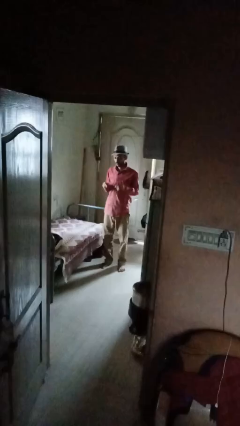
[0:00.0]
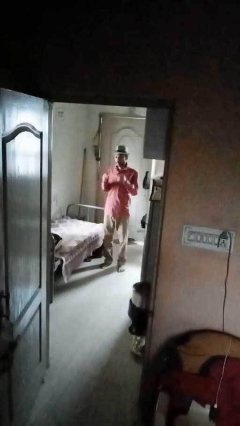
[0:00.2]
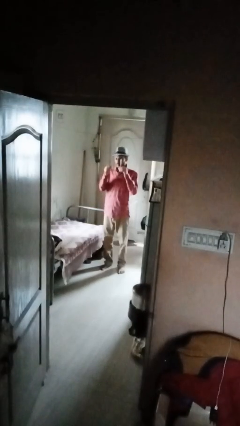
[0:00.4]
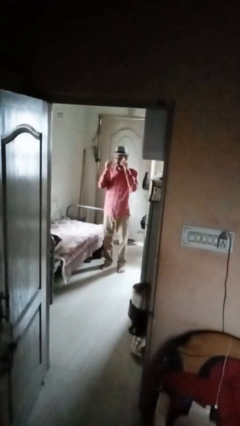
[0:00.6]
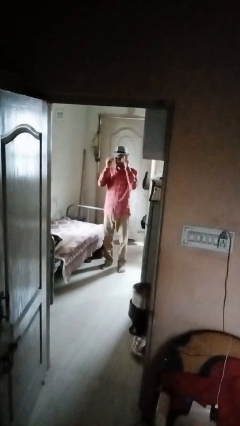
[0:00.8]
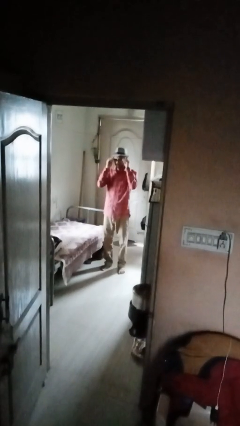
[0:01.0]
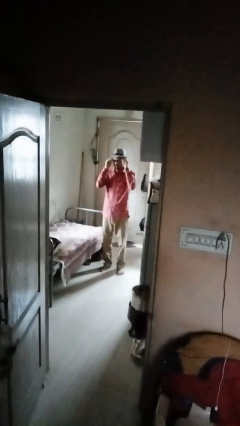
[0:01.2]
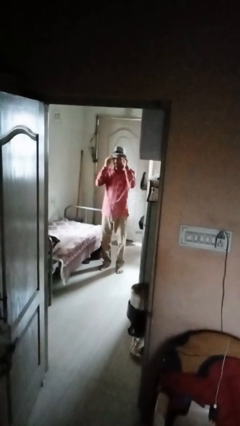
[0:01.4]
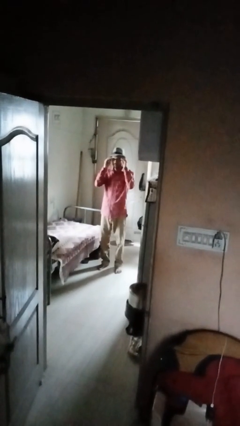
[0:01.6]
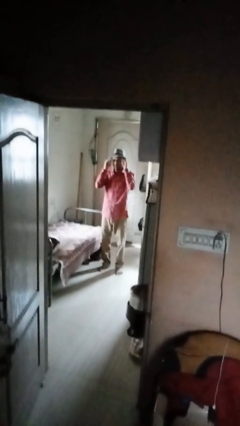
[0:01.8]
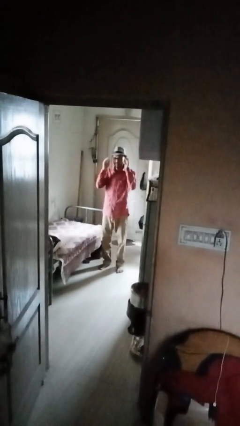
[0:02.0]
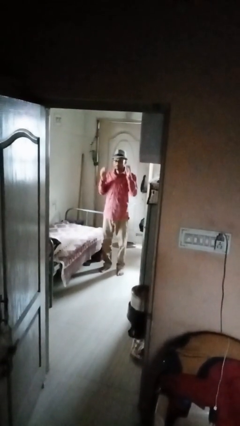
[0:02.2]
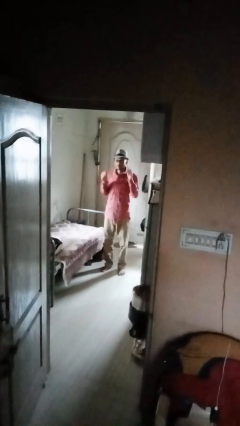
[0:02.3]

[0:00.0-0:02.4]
person puts on glasses

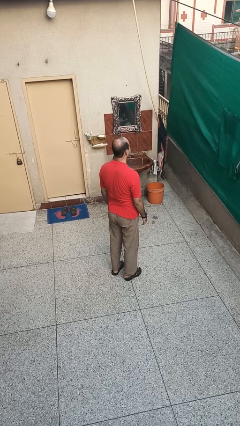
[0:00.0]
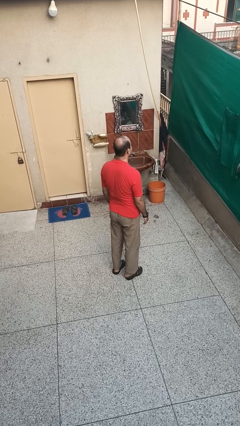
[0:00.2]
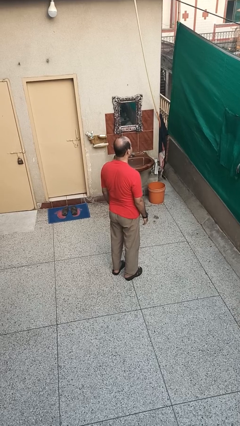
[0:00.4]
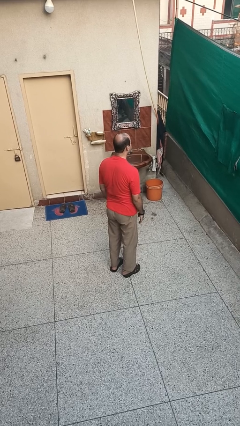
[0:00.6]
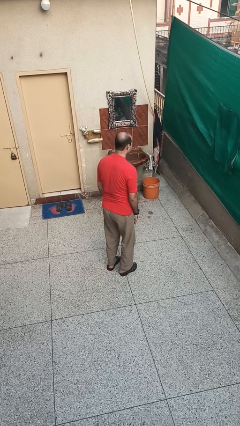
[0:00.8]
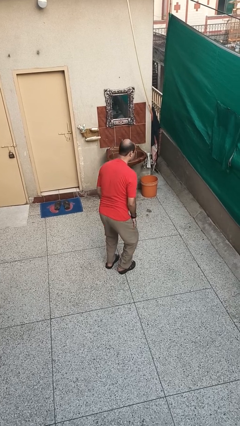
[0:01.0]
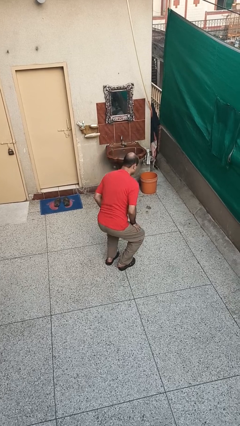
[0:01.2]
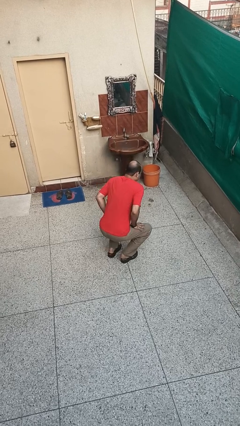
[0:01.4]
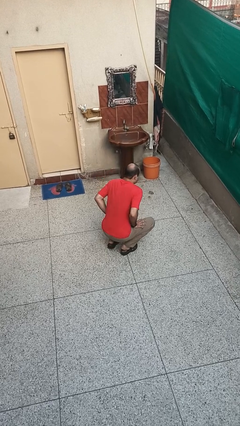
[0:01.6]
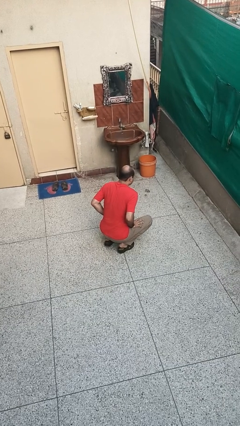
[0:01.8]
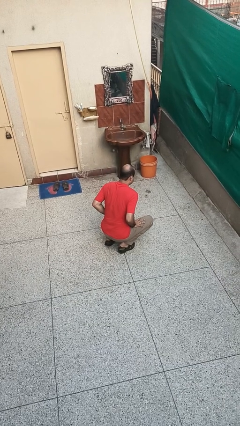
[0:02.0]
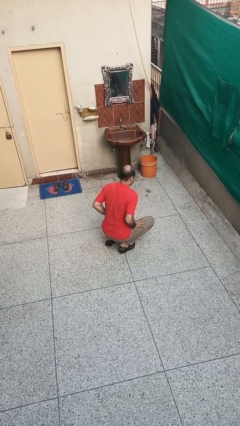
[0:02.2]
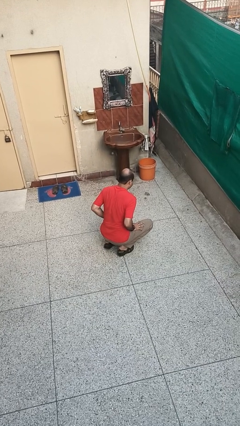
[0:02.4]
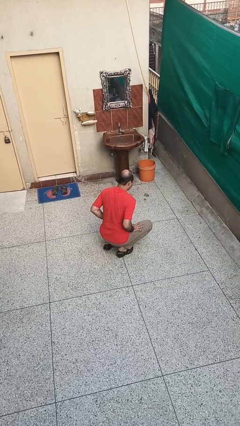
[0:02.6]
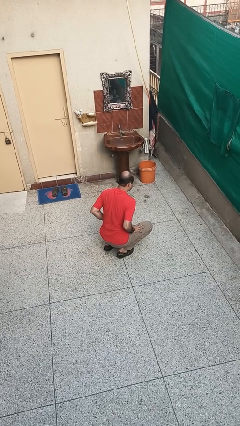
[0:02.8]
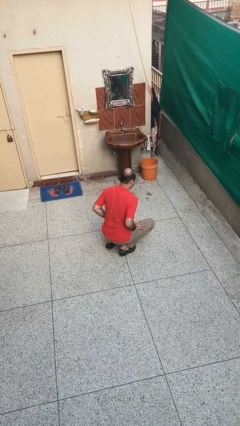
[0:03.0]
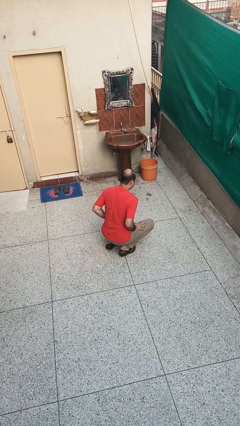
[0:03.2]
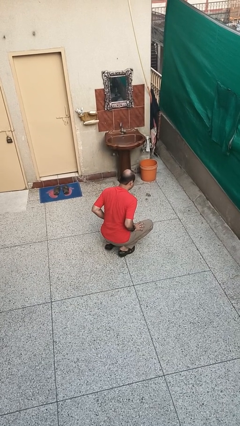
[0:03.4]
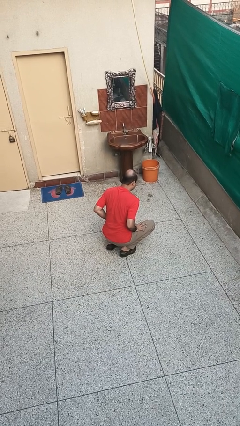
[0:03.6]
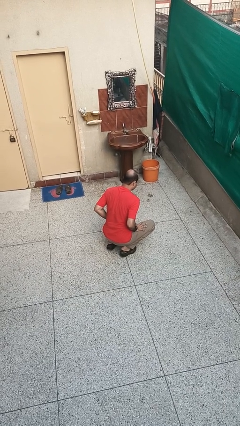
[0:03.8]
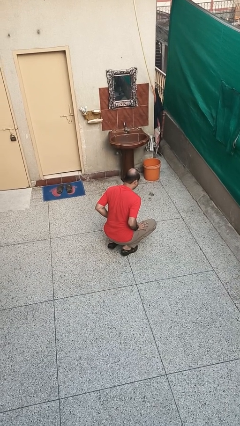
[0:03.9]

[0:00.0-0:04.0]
person squats

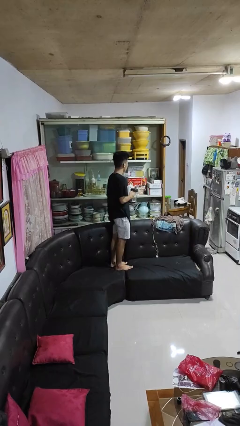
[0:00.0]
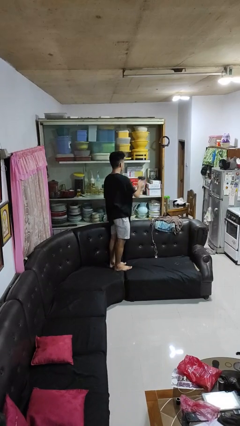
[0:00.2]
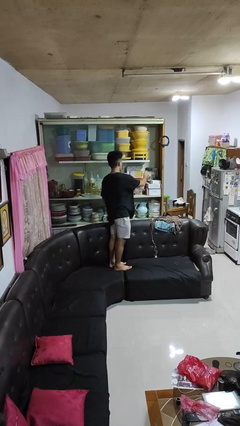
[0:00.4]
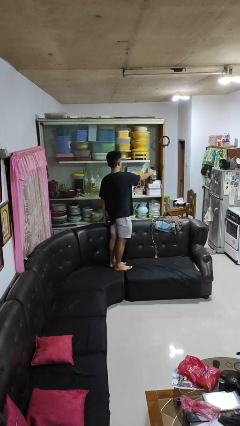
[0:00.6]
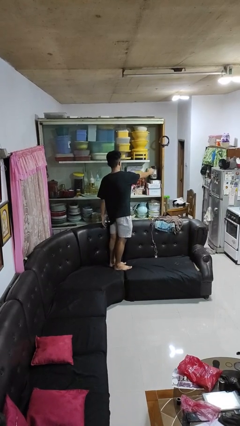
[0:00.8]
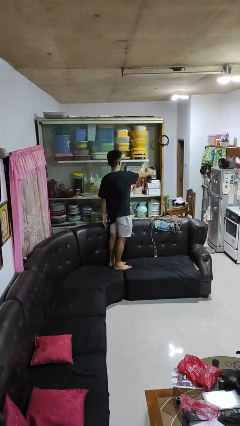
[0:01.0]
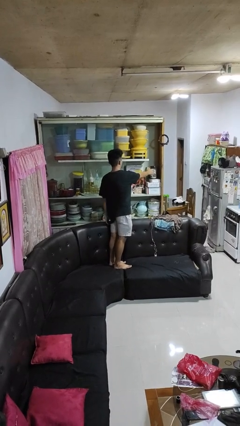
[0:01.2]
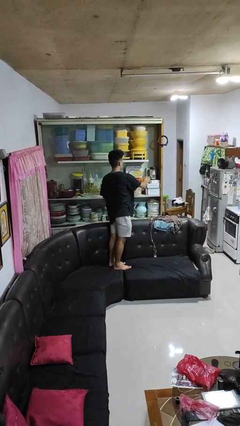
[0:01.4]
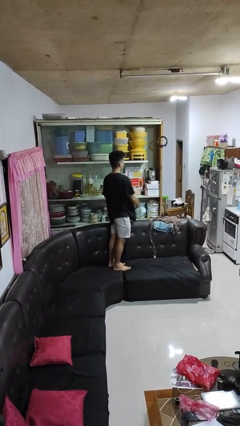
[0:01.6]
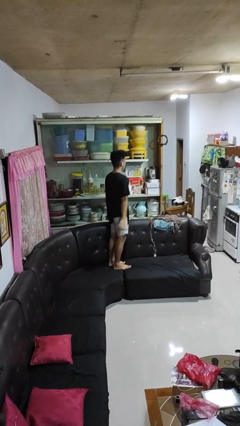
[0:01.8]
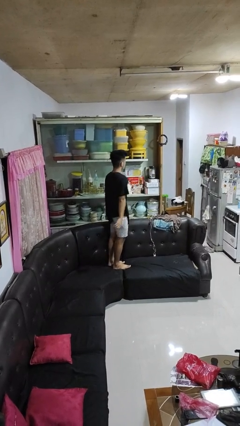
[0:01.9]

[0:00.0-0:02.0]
person puts down object into cabinet

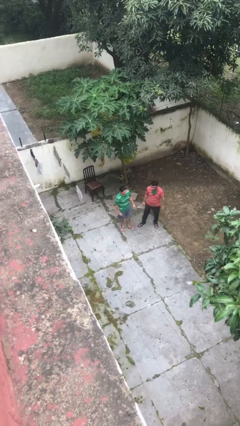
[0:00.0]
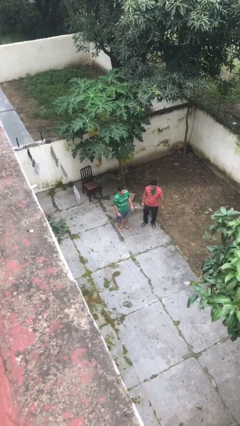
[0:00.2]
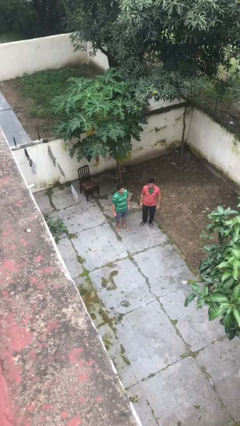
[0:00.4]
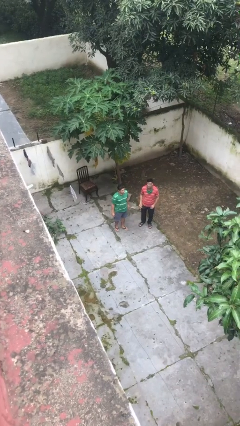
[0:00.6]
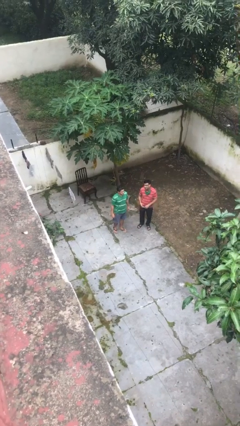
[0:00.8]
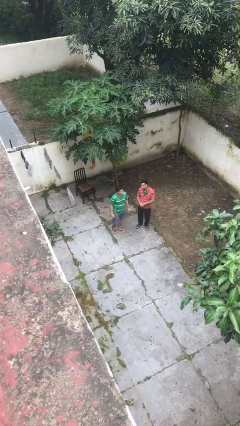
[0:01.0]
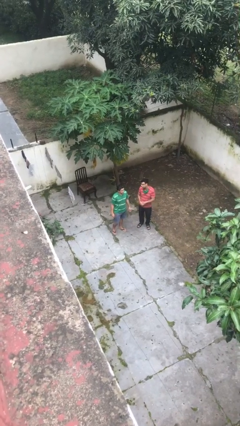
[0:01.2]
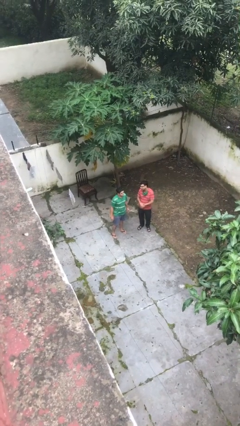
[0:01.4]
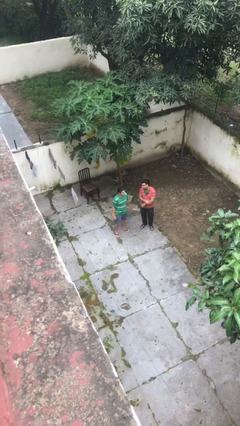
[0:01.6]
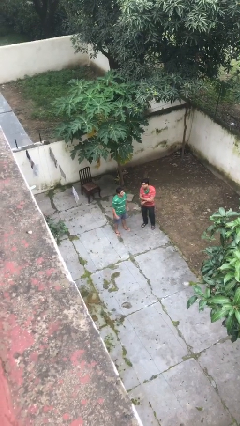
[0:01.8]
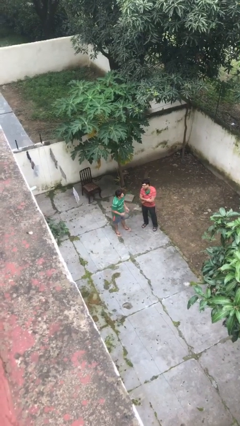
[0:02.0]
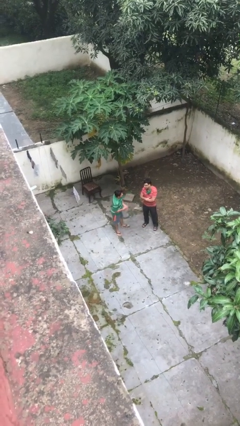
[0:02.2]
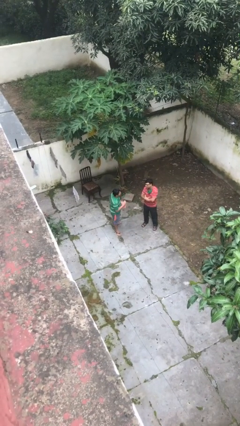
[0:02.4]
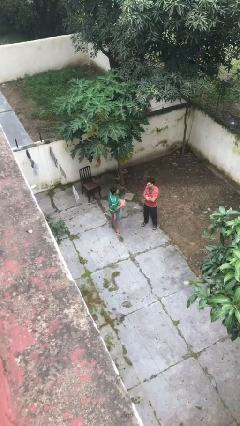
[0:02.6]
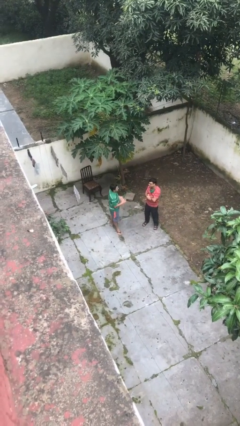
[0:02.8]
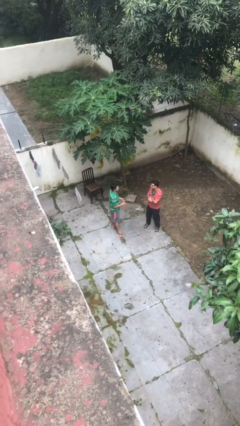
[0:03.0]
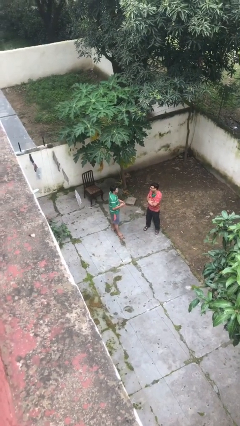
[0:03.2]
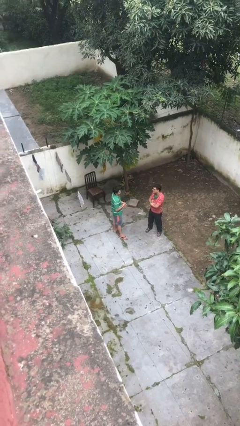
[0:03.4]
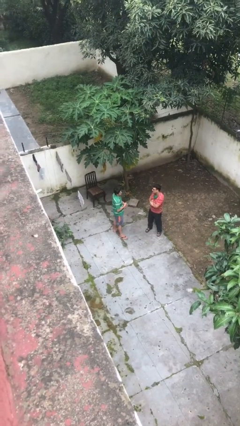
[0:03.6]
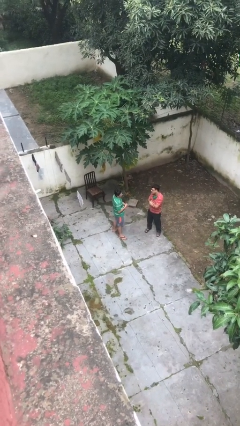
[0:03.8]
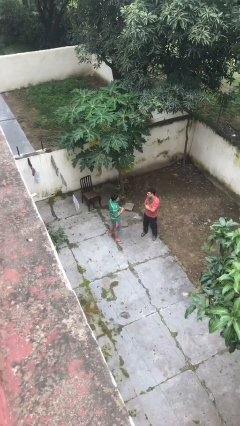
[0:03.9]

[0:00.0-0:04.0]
person talks to person

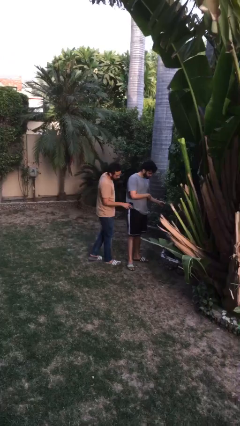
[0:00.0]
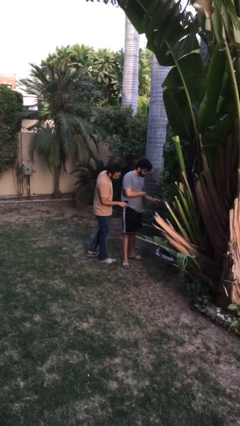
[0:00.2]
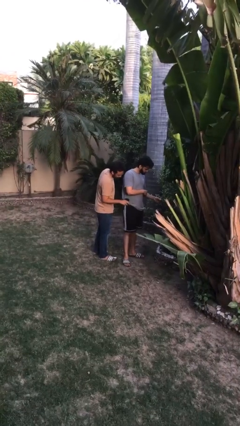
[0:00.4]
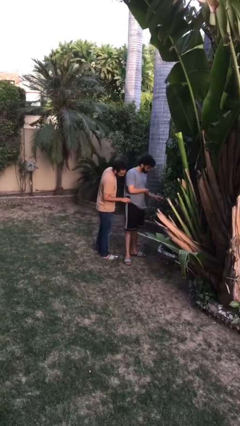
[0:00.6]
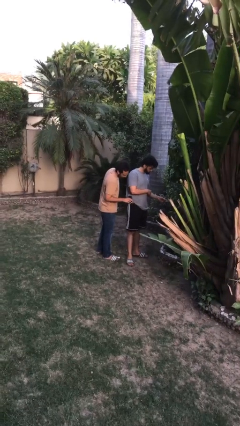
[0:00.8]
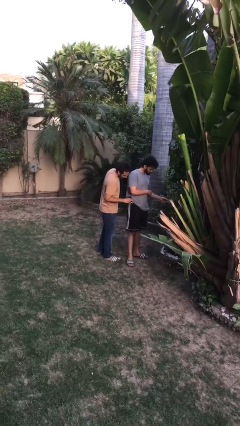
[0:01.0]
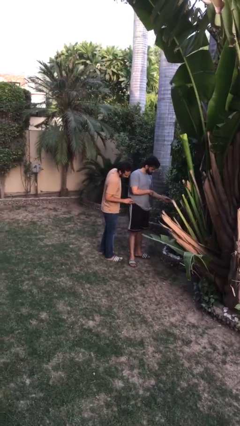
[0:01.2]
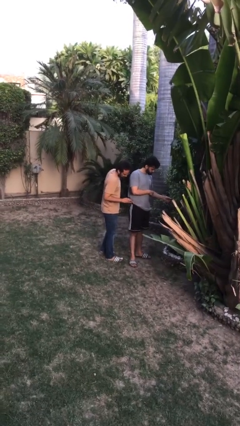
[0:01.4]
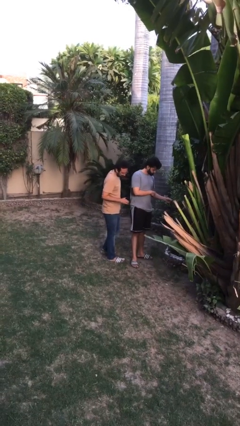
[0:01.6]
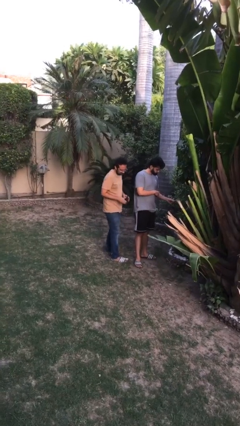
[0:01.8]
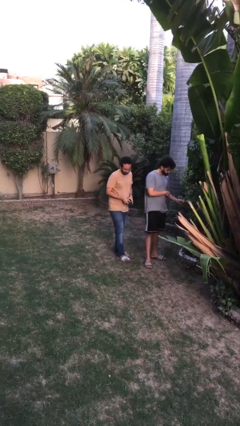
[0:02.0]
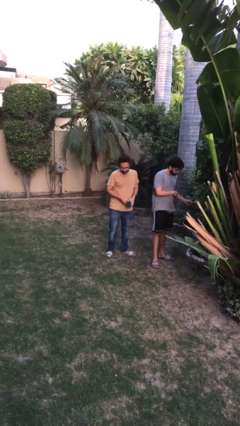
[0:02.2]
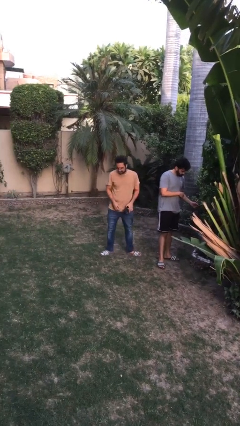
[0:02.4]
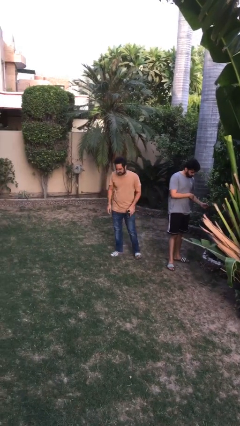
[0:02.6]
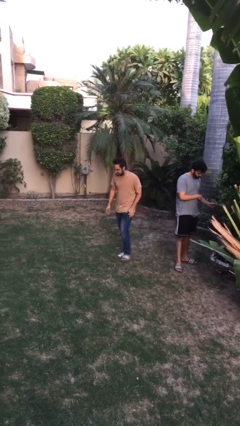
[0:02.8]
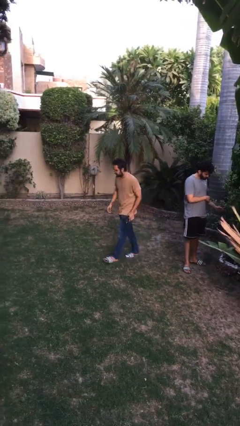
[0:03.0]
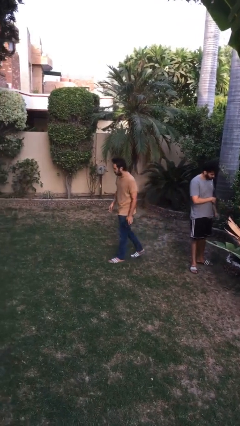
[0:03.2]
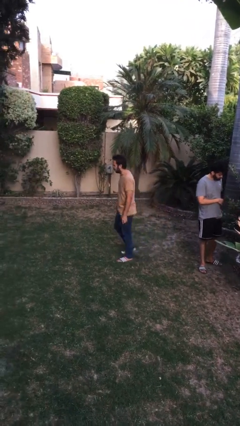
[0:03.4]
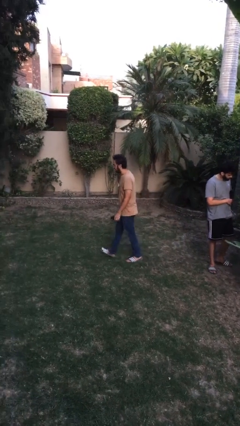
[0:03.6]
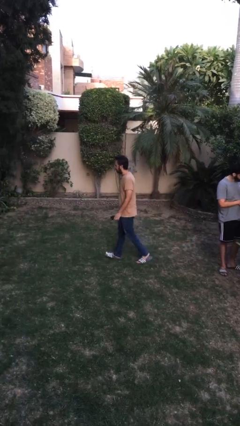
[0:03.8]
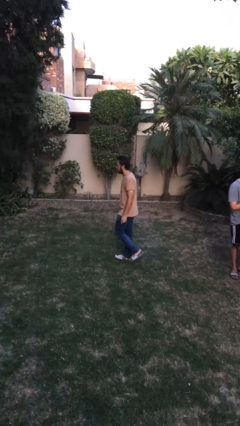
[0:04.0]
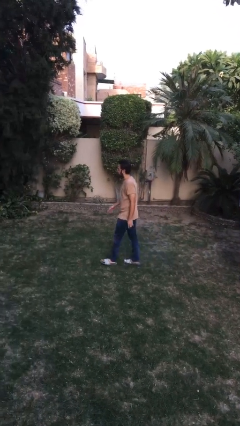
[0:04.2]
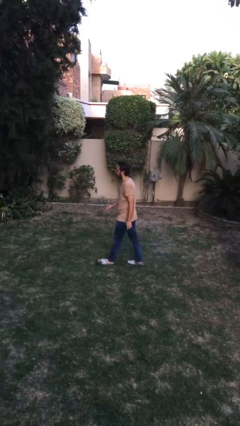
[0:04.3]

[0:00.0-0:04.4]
person steals object from person

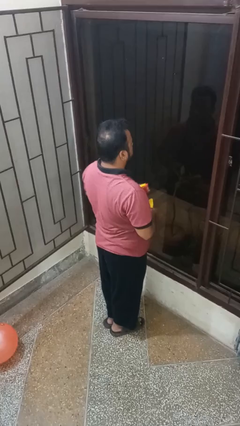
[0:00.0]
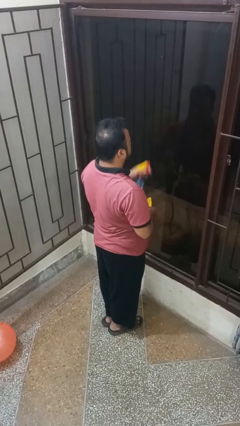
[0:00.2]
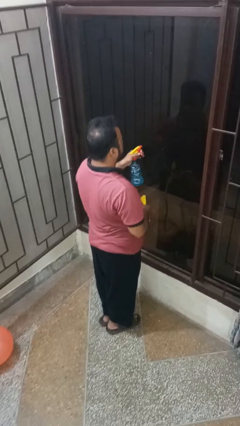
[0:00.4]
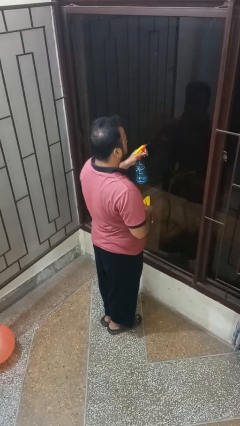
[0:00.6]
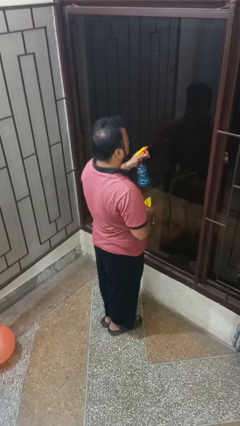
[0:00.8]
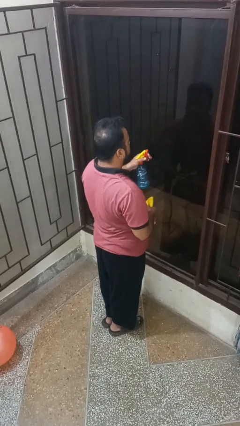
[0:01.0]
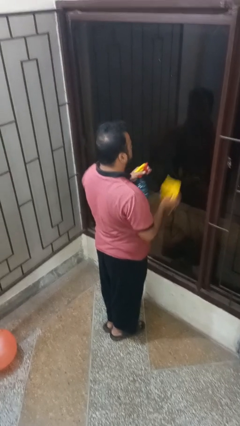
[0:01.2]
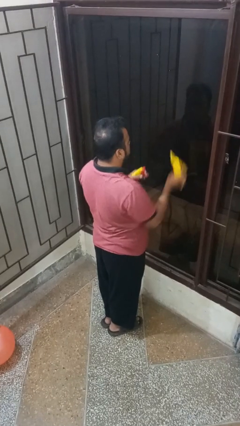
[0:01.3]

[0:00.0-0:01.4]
person sprays from bottle
